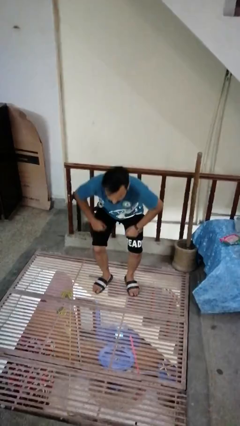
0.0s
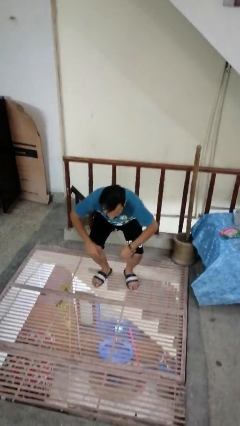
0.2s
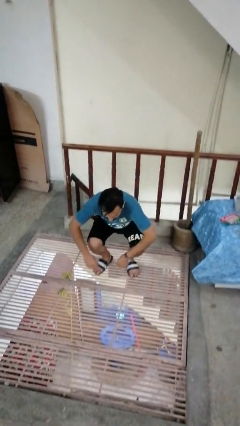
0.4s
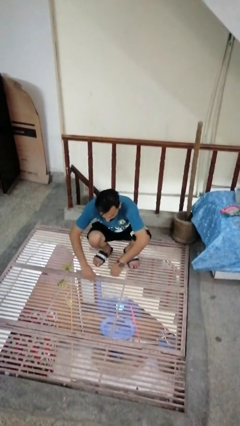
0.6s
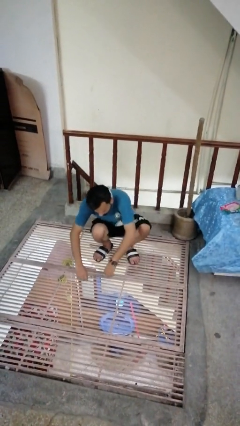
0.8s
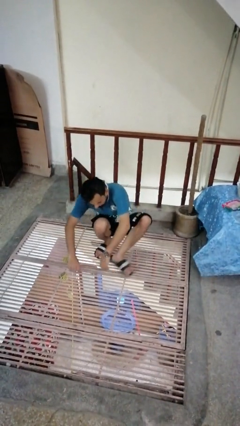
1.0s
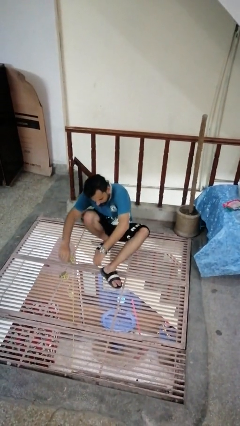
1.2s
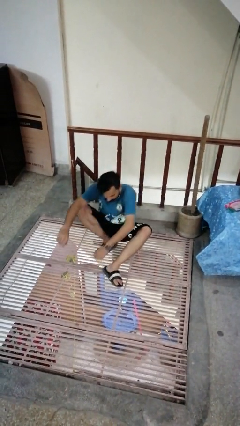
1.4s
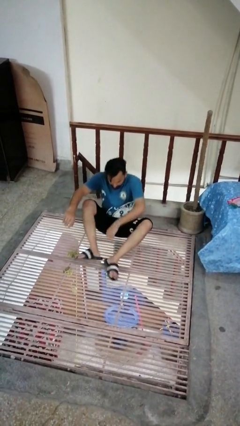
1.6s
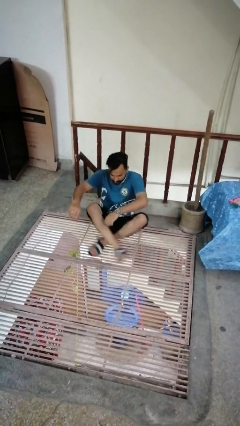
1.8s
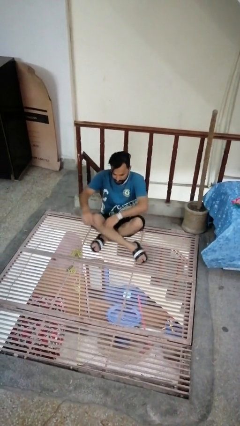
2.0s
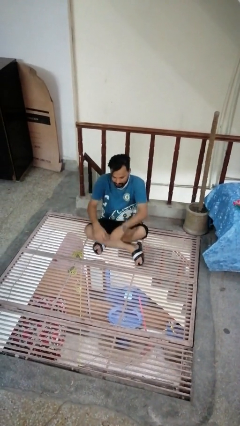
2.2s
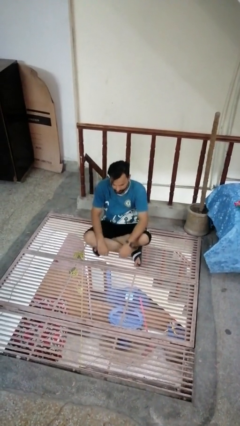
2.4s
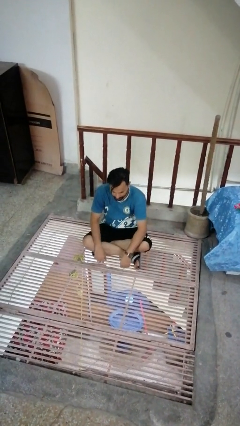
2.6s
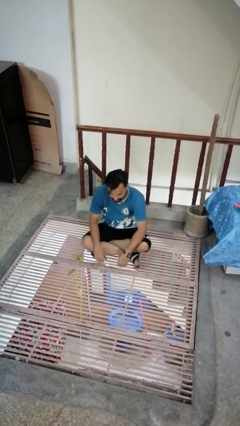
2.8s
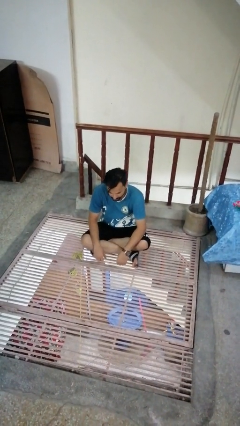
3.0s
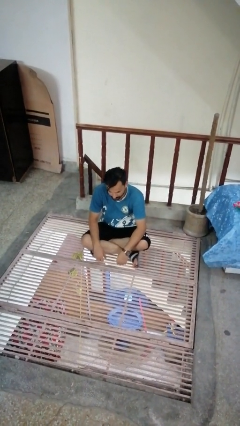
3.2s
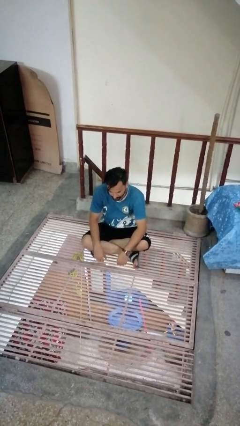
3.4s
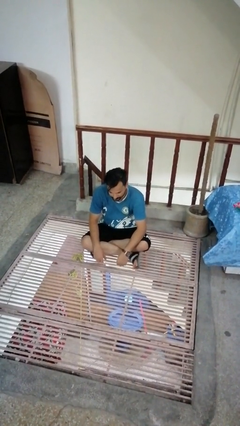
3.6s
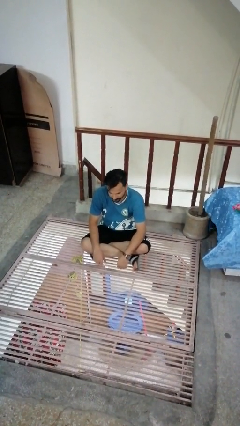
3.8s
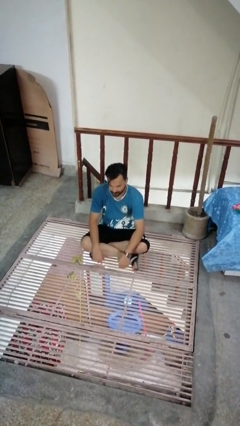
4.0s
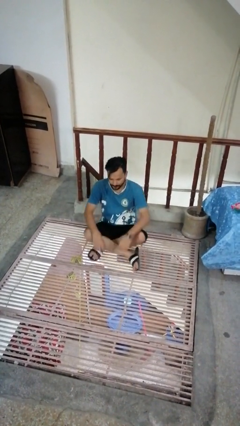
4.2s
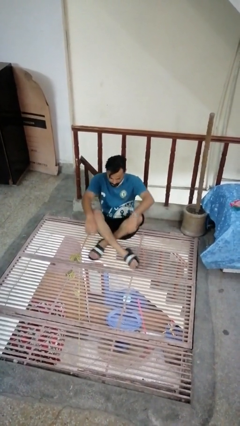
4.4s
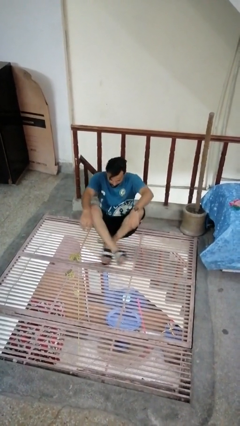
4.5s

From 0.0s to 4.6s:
person sits crisscross

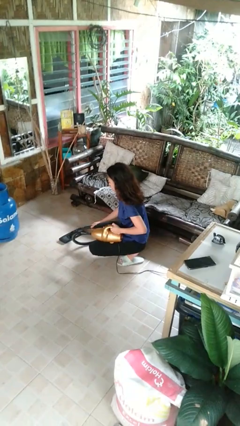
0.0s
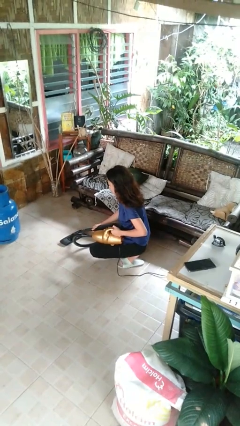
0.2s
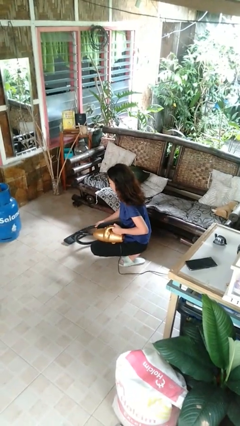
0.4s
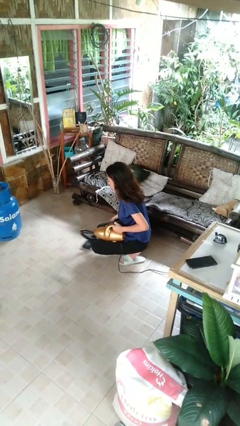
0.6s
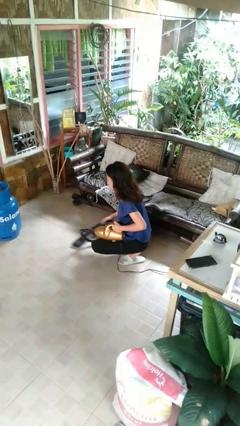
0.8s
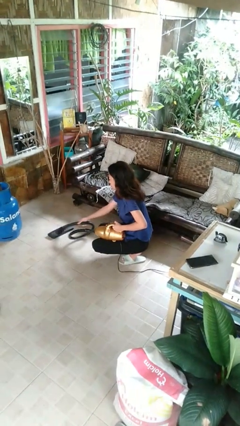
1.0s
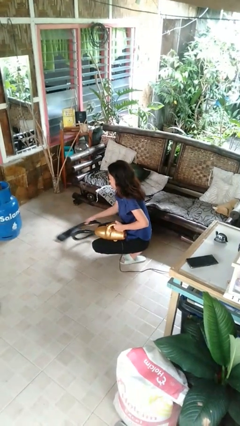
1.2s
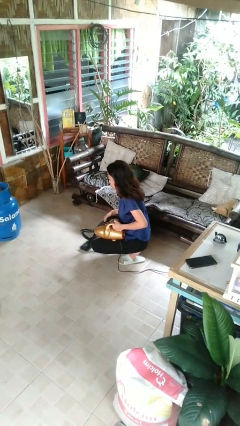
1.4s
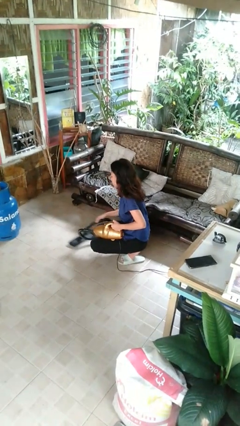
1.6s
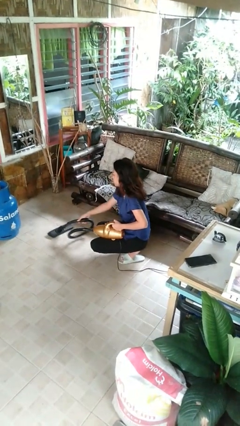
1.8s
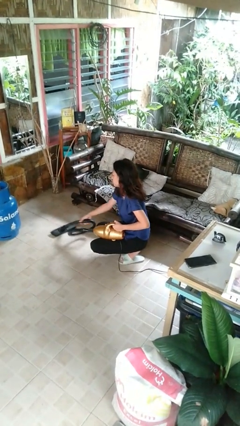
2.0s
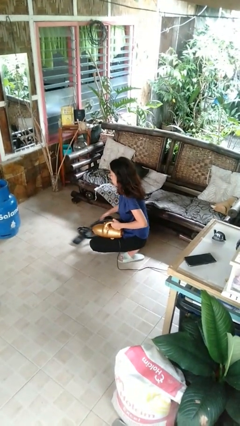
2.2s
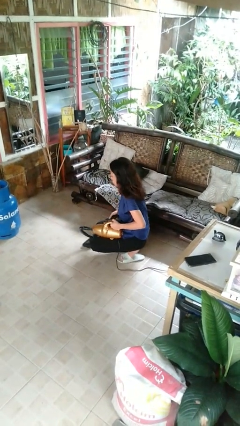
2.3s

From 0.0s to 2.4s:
person vacuums carpet

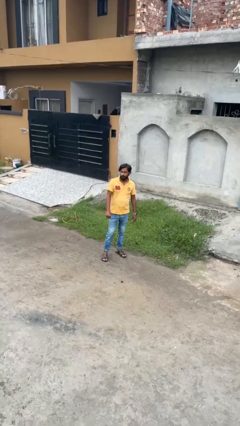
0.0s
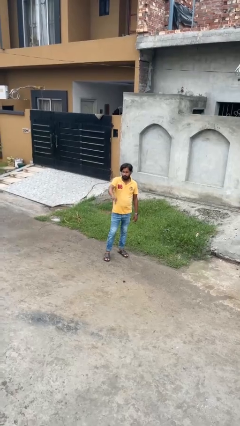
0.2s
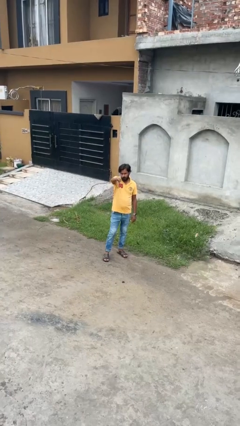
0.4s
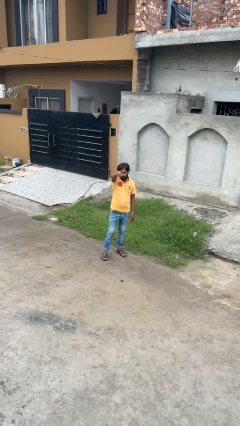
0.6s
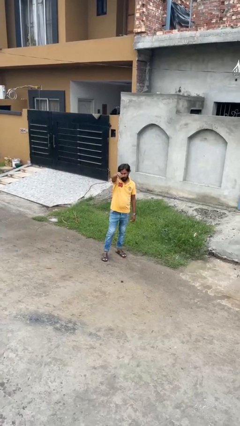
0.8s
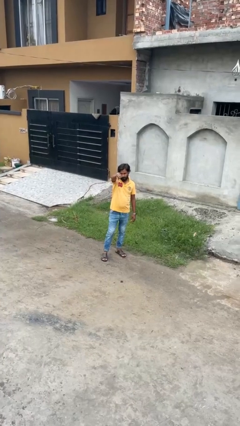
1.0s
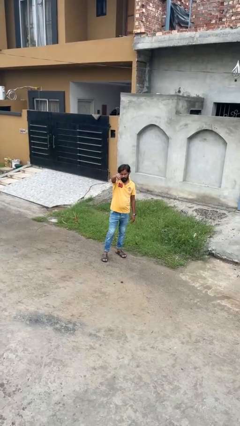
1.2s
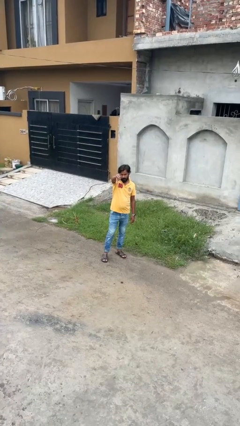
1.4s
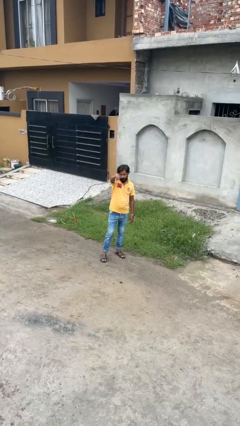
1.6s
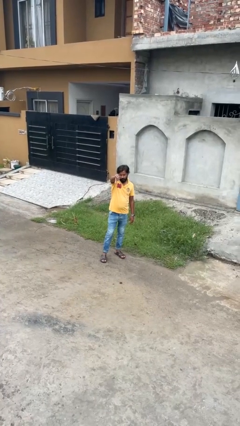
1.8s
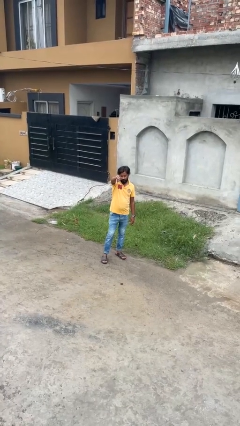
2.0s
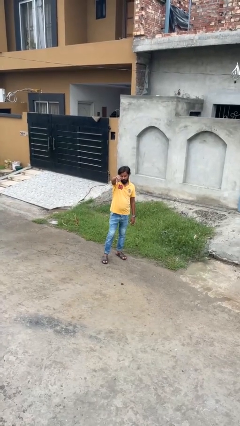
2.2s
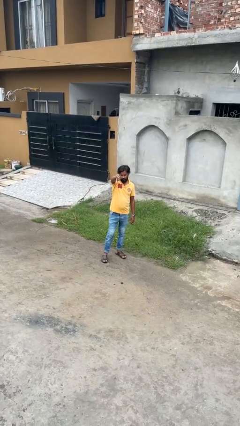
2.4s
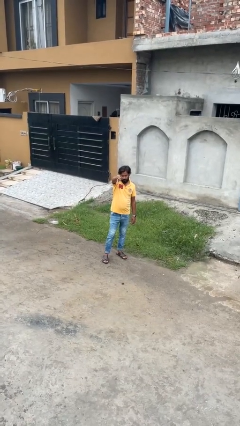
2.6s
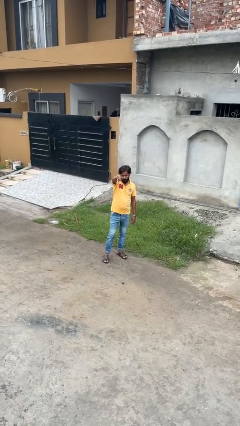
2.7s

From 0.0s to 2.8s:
person gestures thumbs down

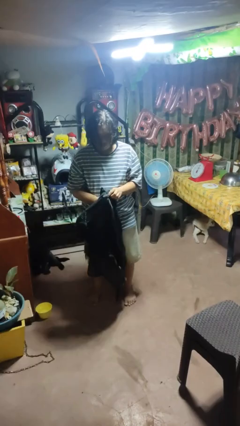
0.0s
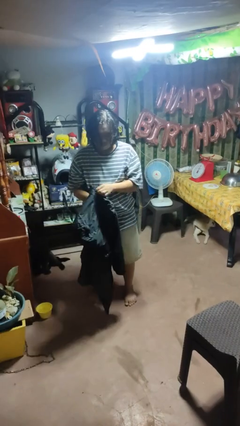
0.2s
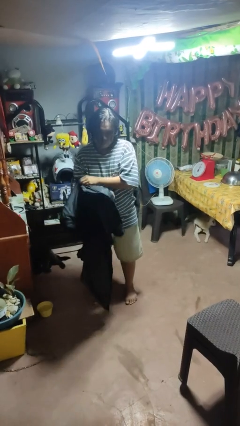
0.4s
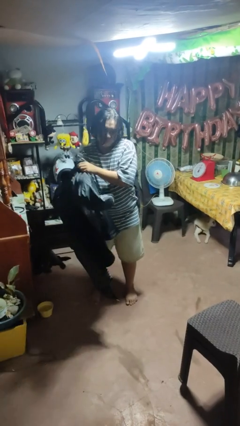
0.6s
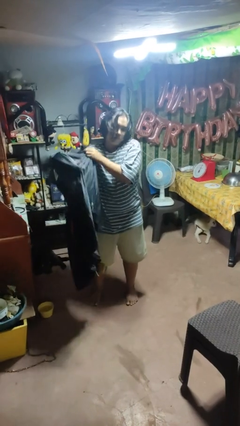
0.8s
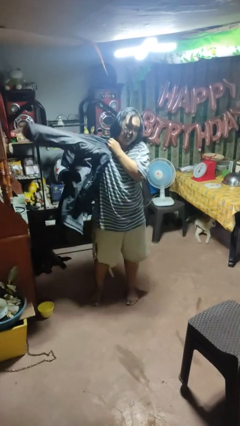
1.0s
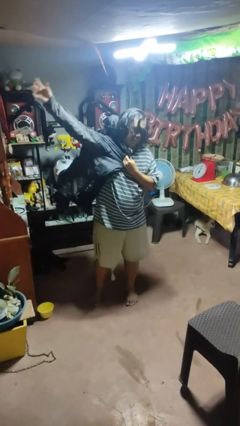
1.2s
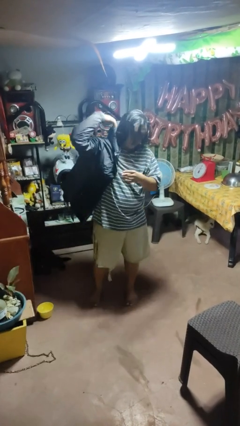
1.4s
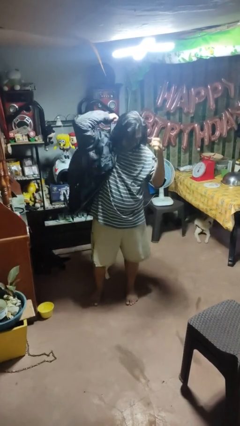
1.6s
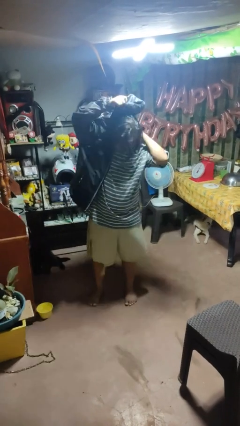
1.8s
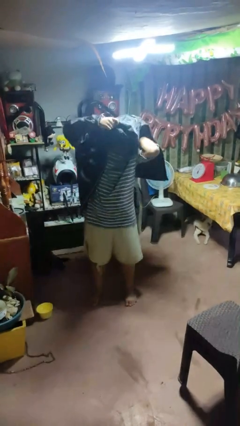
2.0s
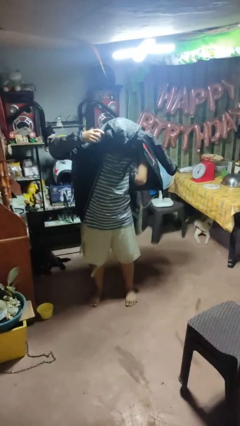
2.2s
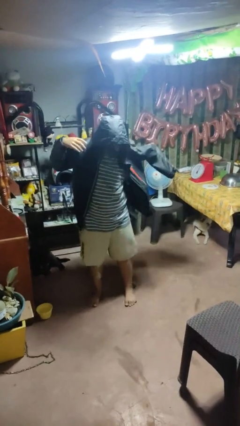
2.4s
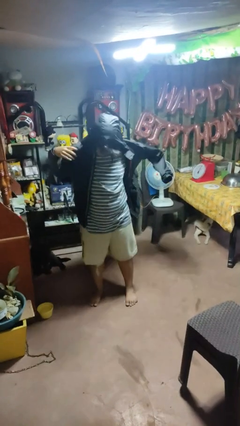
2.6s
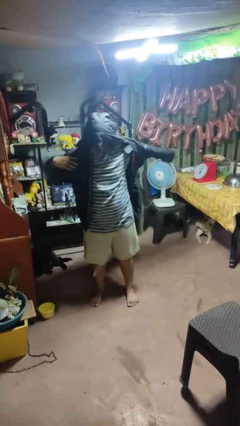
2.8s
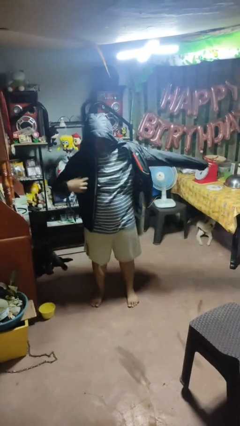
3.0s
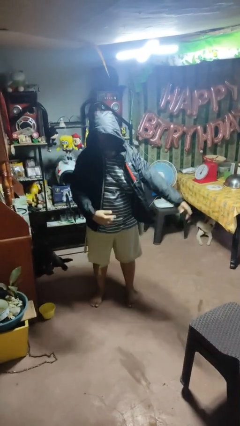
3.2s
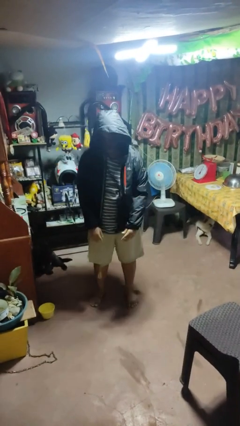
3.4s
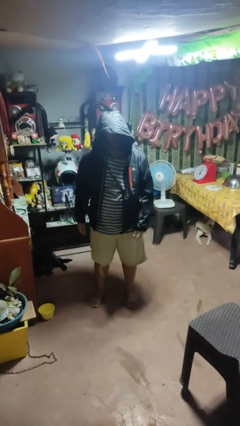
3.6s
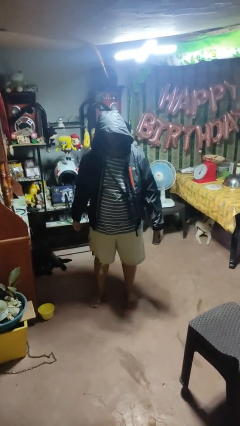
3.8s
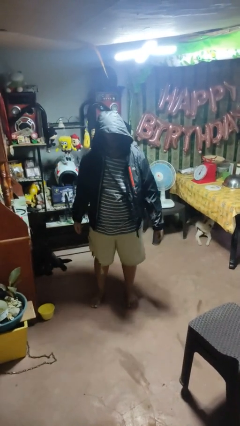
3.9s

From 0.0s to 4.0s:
person puts on hoodie

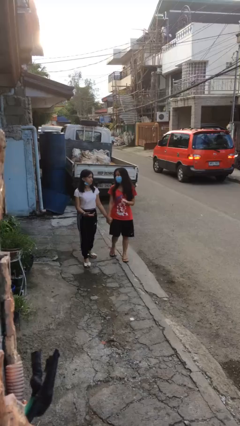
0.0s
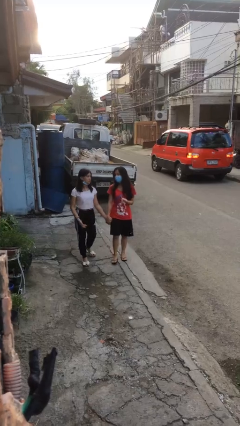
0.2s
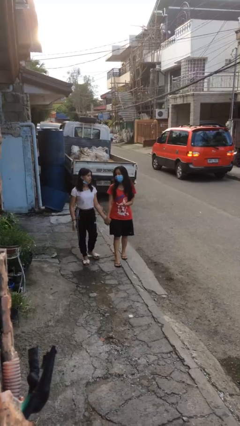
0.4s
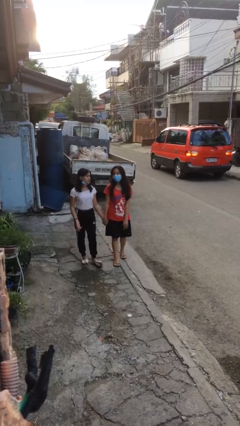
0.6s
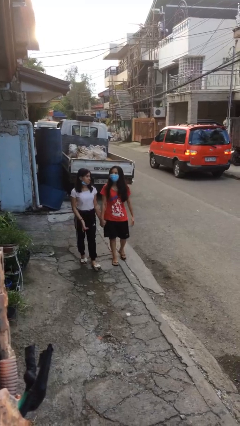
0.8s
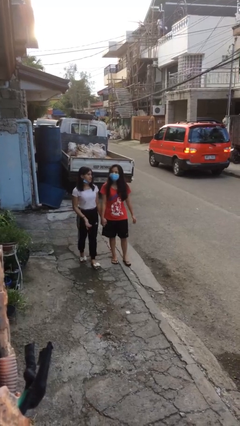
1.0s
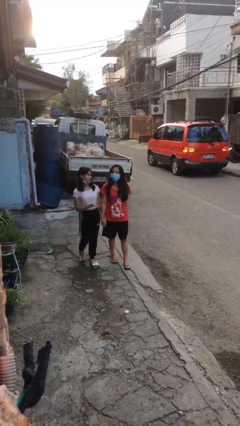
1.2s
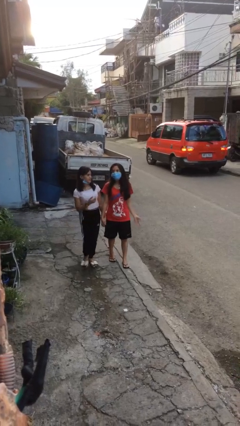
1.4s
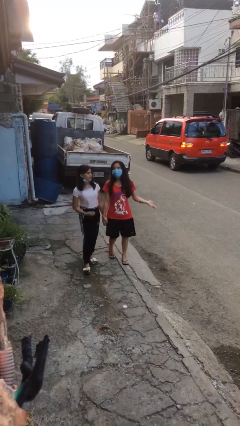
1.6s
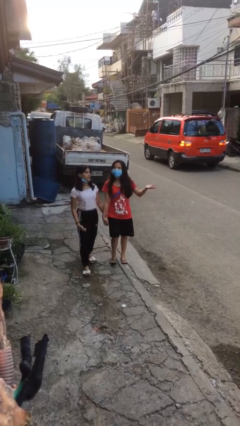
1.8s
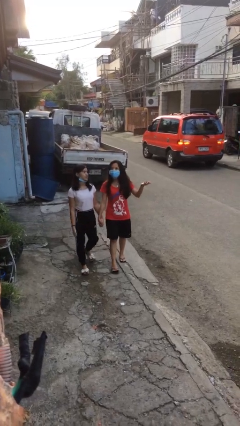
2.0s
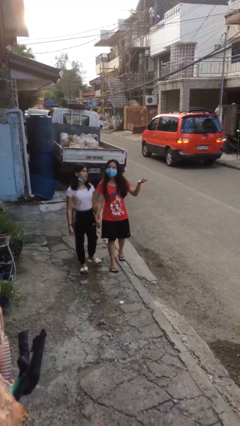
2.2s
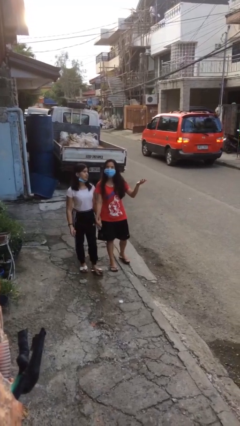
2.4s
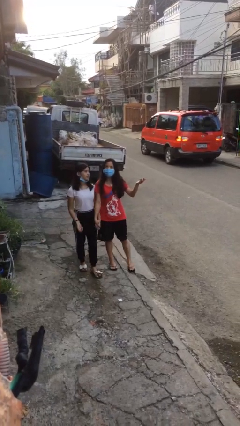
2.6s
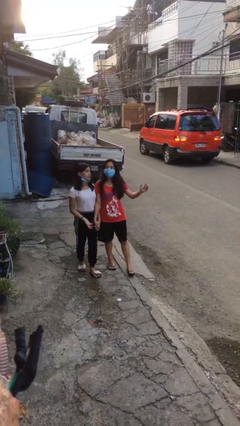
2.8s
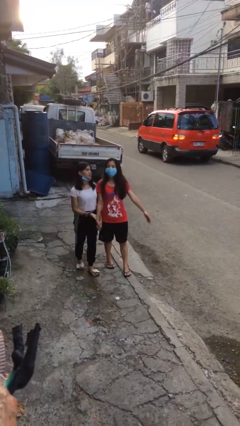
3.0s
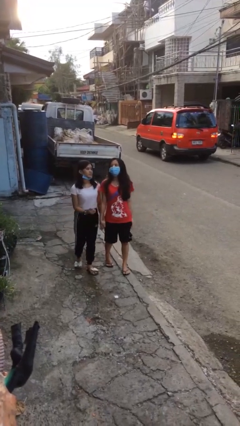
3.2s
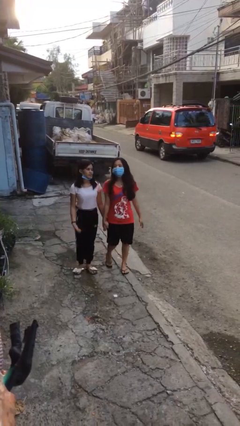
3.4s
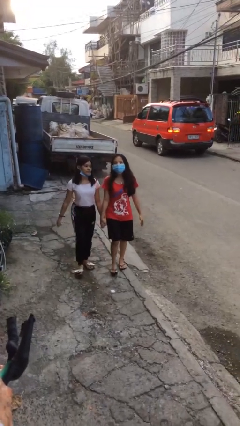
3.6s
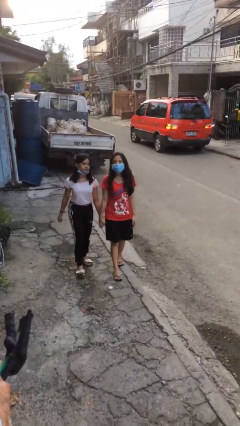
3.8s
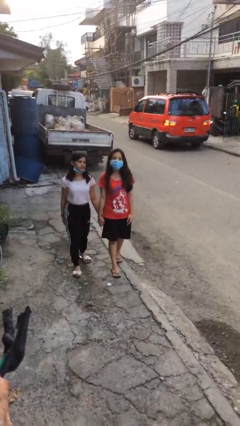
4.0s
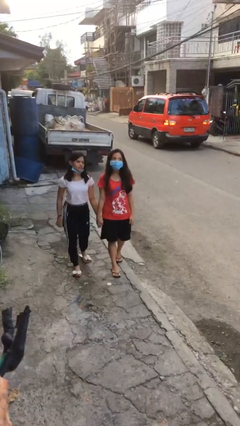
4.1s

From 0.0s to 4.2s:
person holds hand
